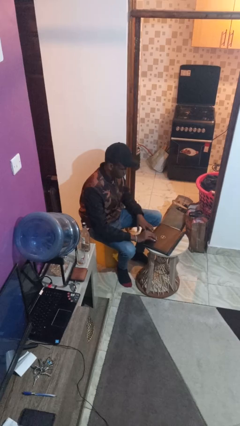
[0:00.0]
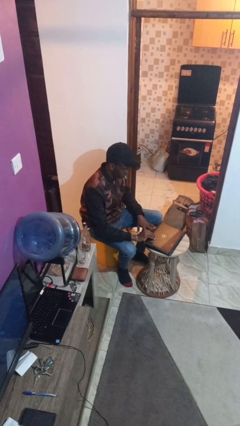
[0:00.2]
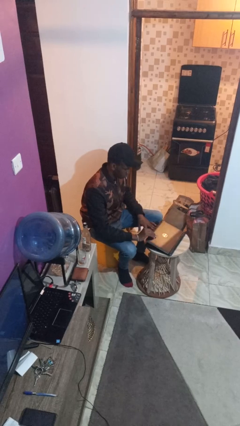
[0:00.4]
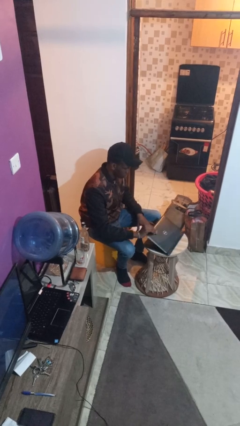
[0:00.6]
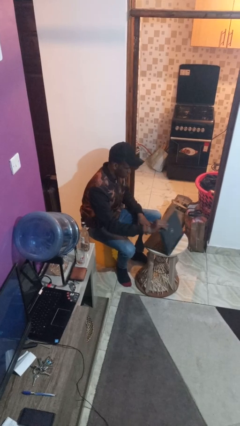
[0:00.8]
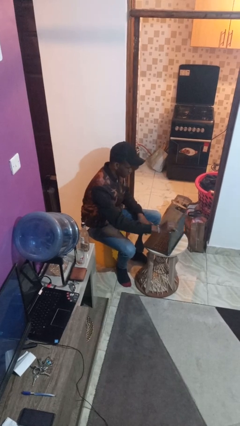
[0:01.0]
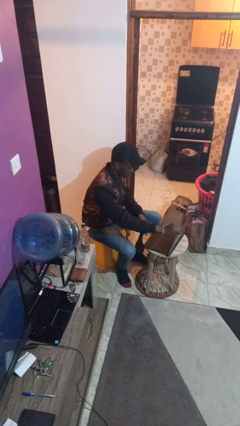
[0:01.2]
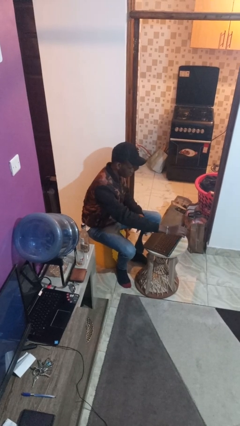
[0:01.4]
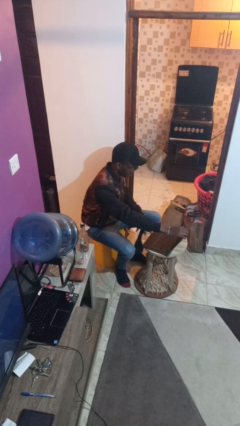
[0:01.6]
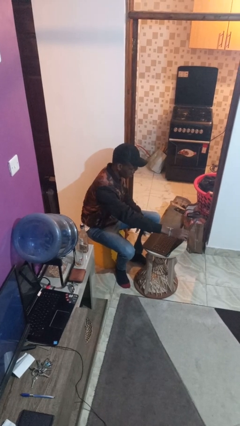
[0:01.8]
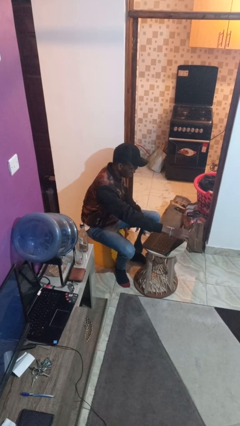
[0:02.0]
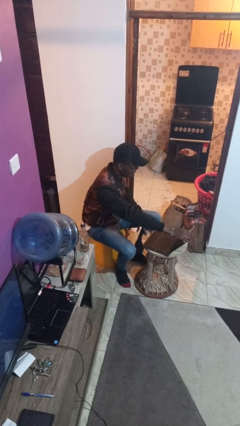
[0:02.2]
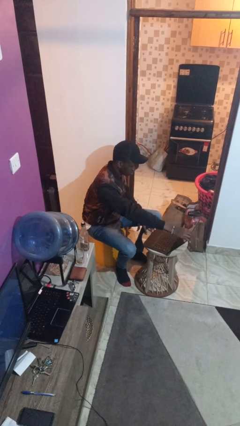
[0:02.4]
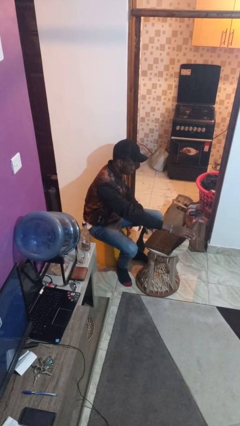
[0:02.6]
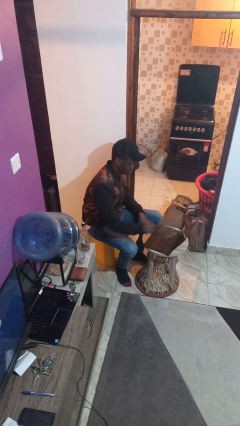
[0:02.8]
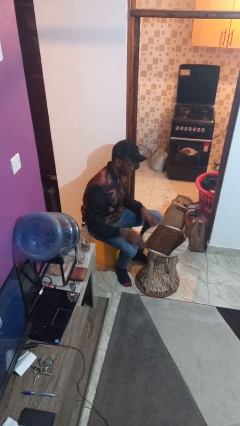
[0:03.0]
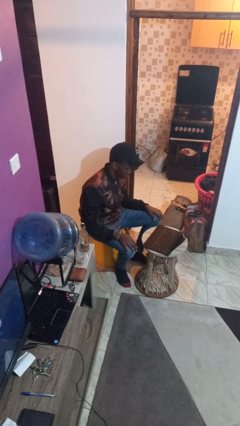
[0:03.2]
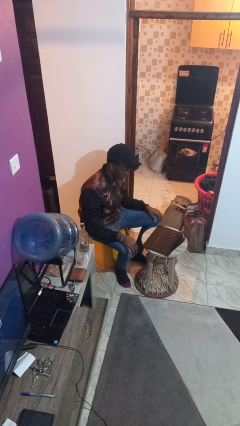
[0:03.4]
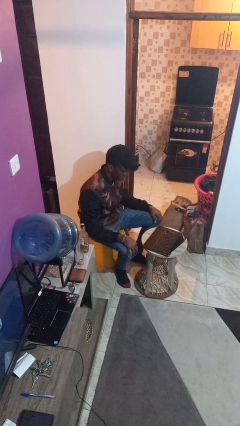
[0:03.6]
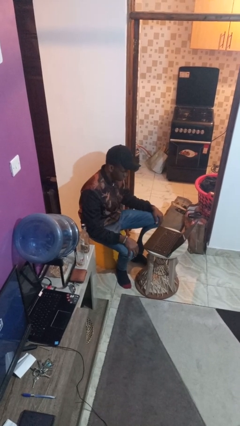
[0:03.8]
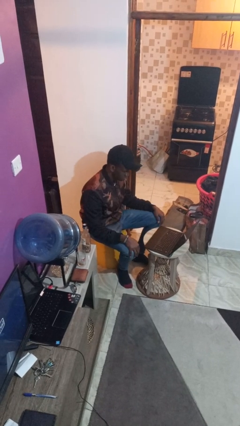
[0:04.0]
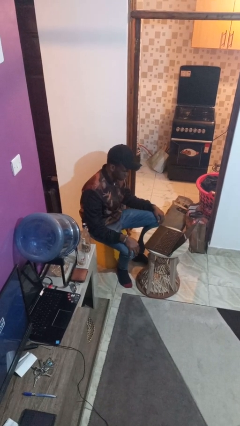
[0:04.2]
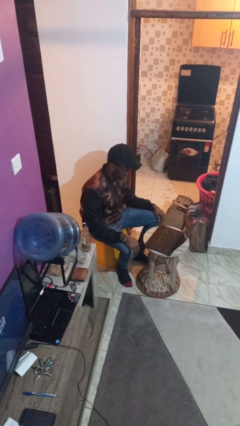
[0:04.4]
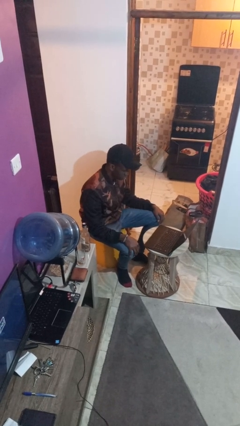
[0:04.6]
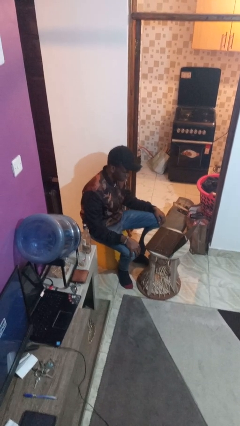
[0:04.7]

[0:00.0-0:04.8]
person opens laptop

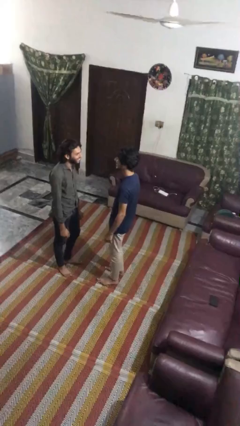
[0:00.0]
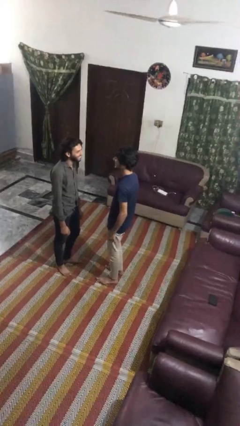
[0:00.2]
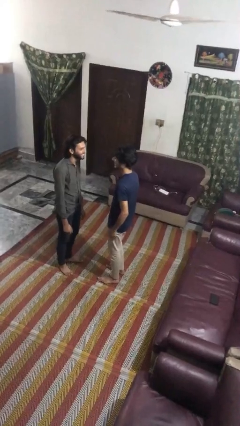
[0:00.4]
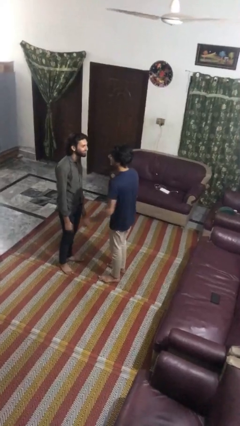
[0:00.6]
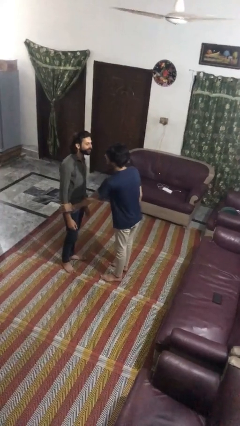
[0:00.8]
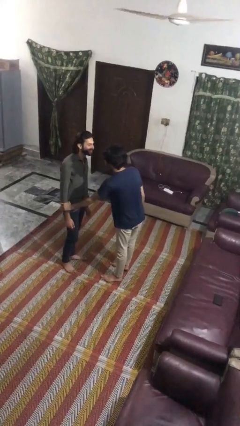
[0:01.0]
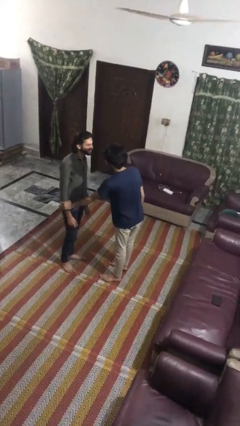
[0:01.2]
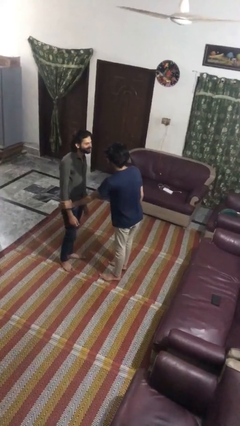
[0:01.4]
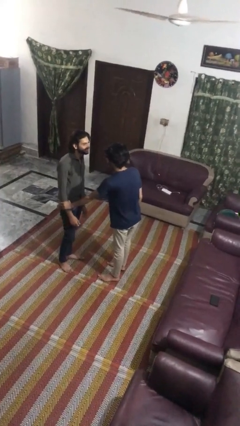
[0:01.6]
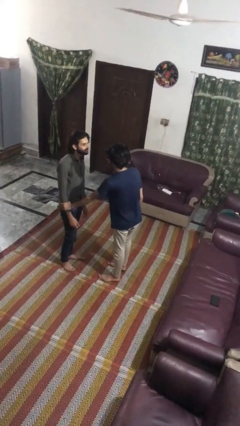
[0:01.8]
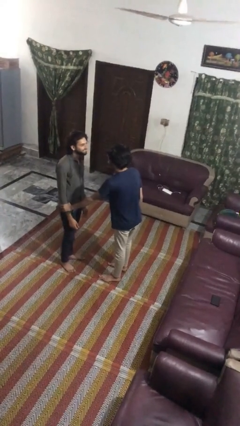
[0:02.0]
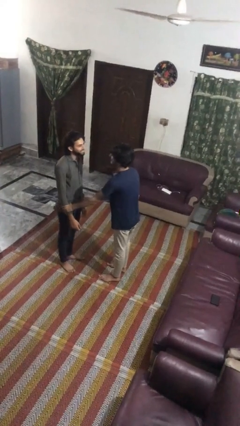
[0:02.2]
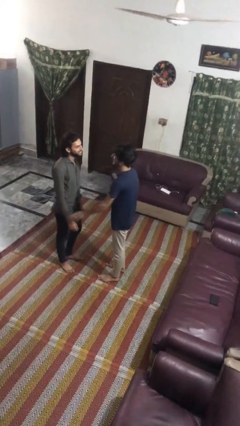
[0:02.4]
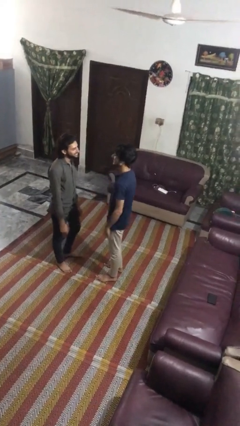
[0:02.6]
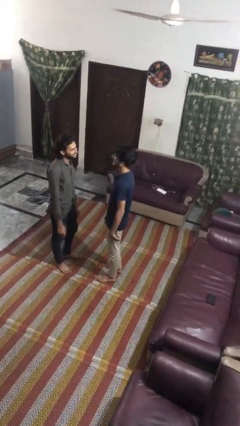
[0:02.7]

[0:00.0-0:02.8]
person grabs person by forearm

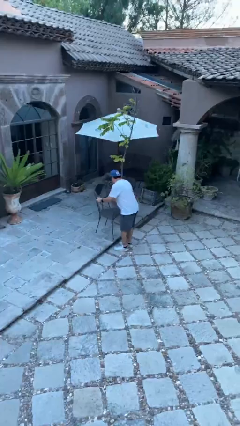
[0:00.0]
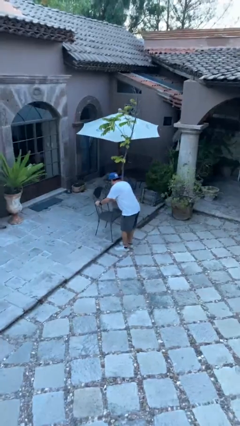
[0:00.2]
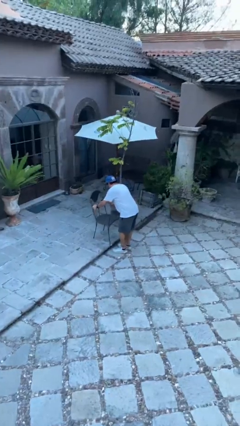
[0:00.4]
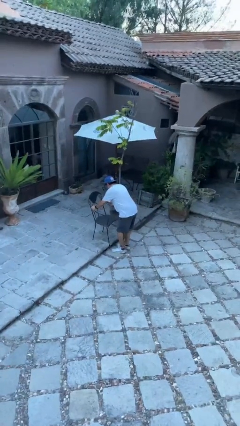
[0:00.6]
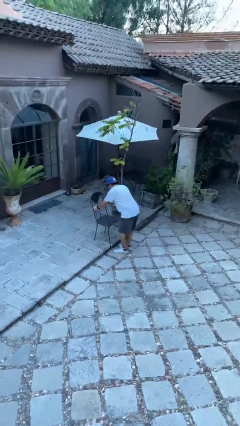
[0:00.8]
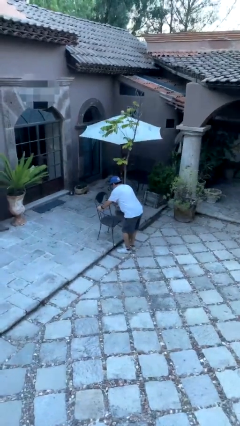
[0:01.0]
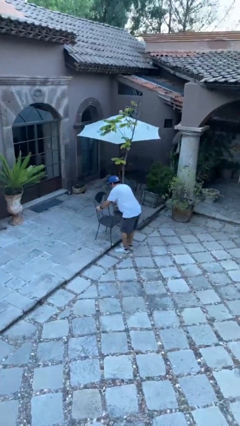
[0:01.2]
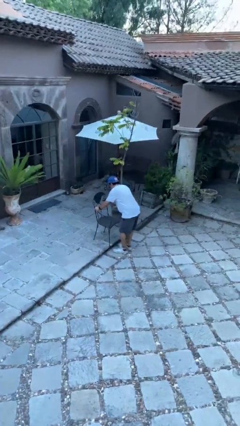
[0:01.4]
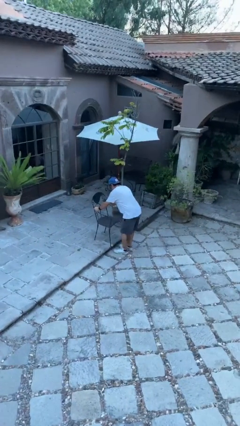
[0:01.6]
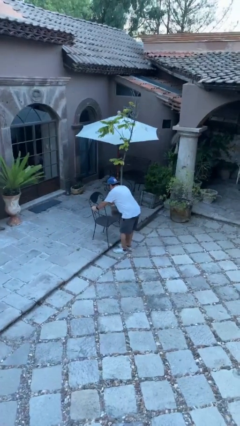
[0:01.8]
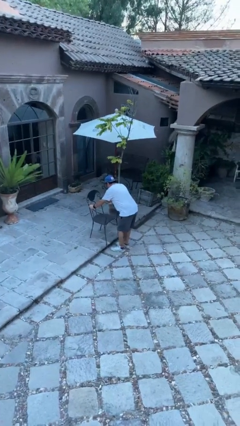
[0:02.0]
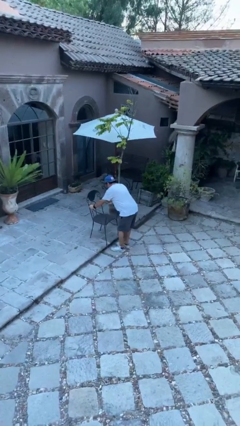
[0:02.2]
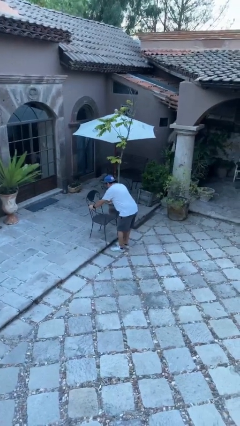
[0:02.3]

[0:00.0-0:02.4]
person puts down object on floor

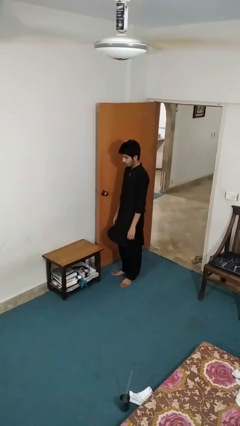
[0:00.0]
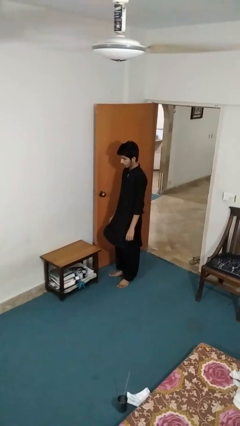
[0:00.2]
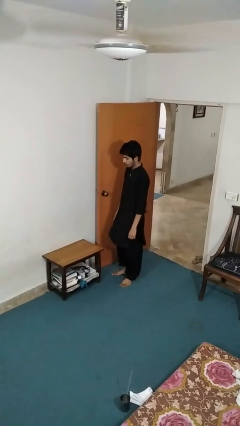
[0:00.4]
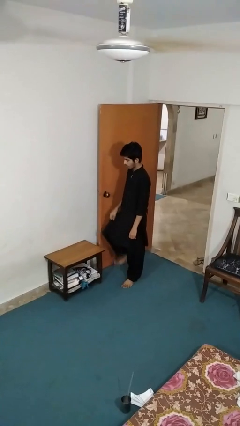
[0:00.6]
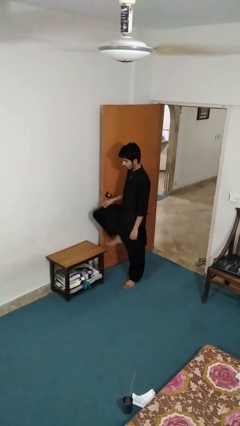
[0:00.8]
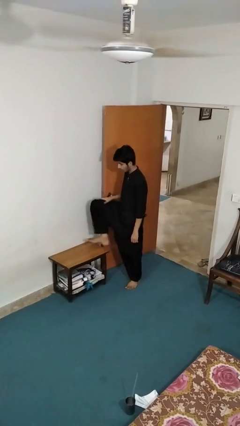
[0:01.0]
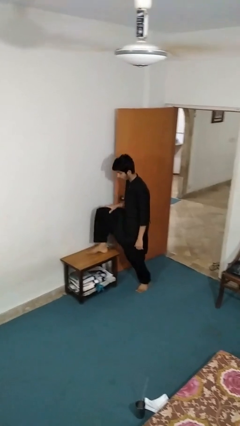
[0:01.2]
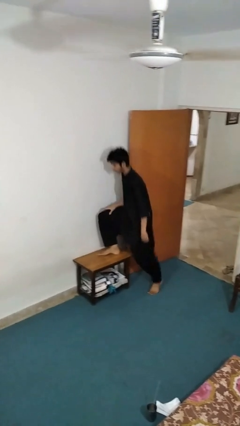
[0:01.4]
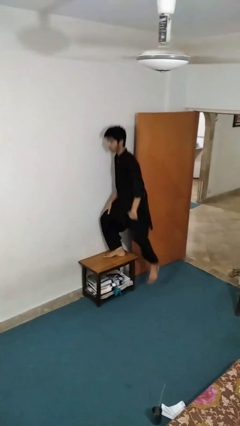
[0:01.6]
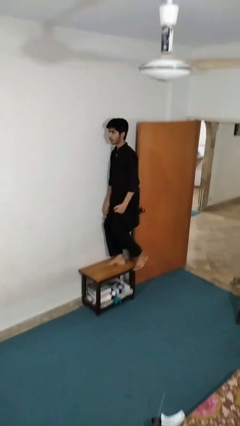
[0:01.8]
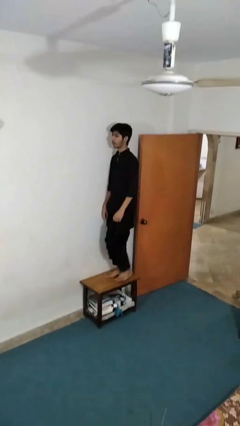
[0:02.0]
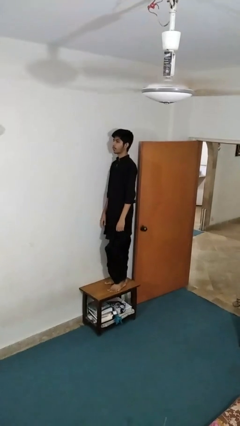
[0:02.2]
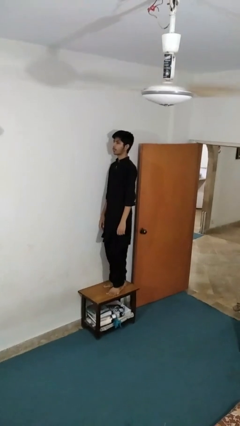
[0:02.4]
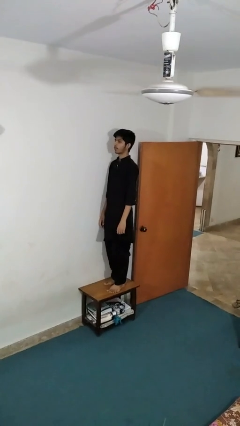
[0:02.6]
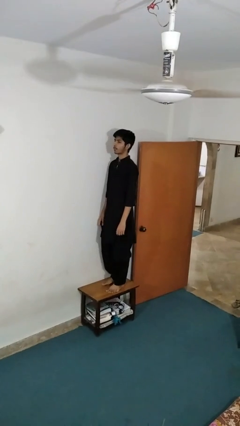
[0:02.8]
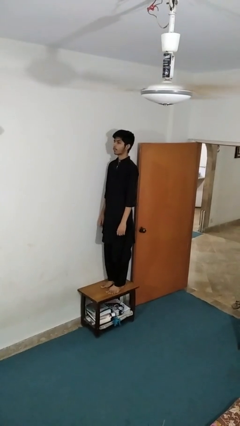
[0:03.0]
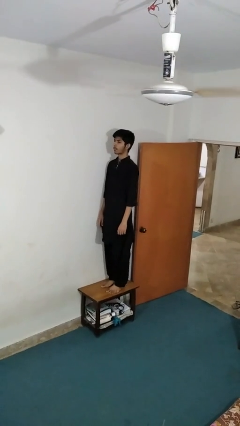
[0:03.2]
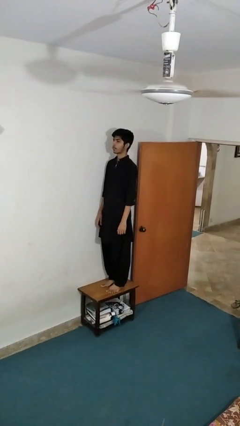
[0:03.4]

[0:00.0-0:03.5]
person climbs on table

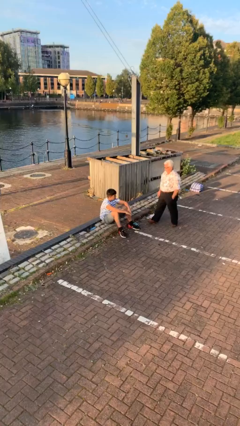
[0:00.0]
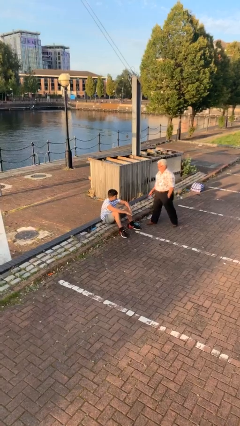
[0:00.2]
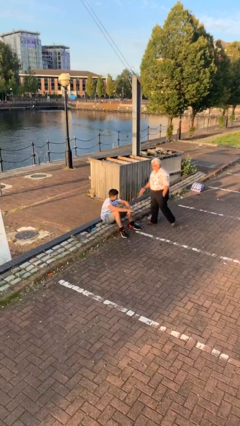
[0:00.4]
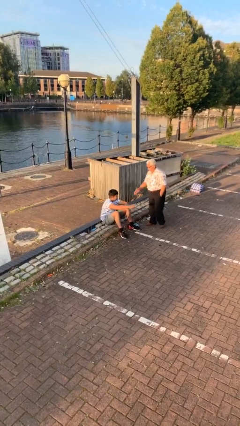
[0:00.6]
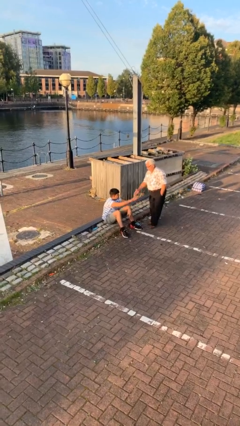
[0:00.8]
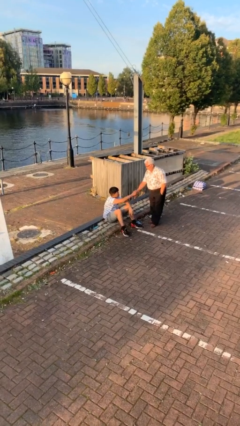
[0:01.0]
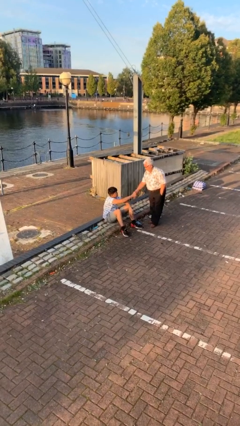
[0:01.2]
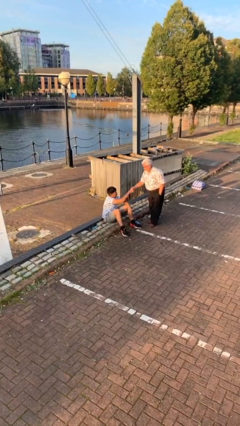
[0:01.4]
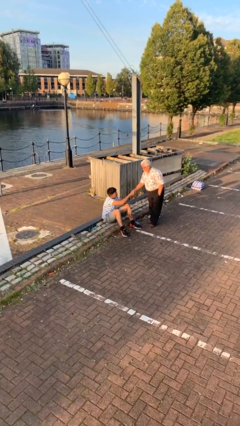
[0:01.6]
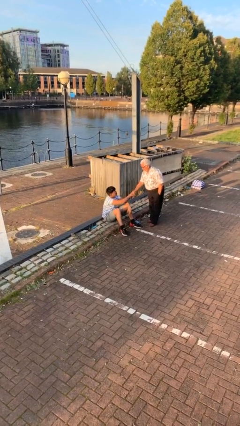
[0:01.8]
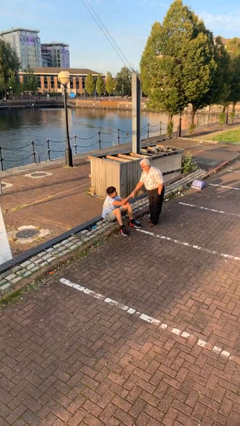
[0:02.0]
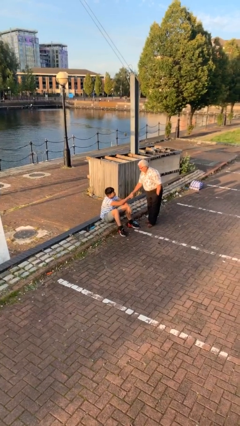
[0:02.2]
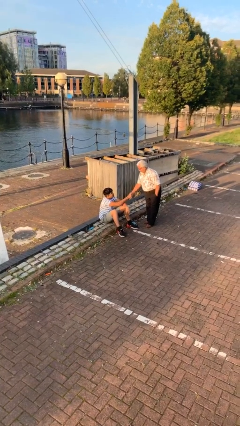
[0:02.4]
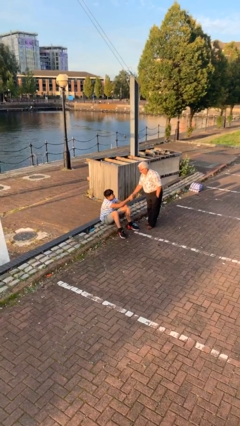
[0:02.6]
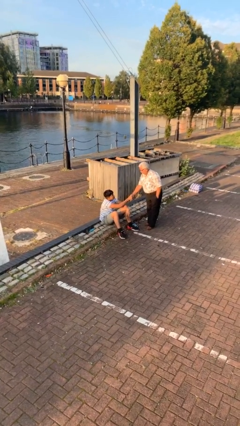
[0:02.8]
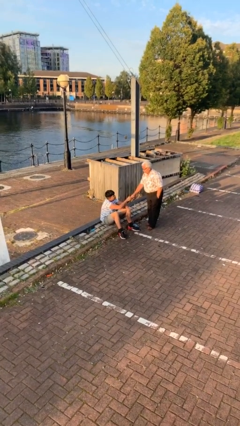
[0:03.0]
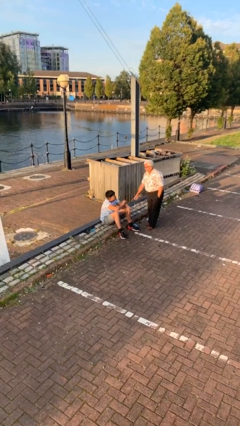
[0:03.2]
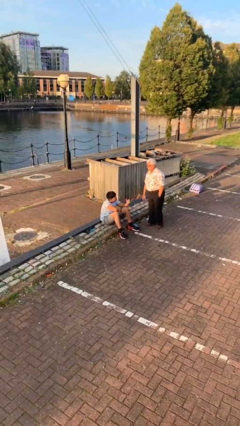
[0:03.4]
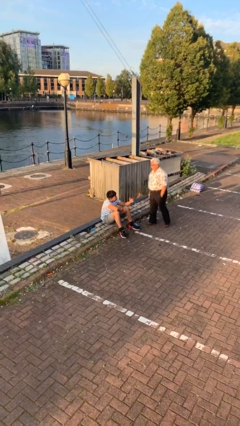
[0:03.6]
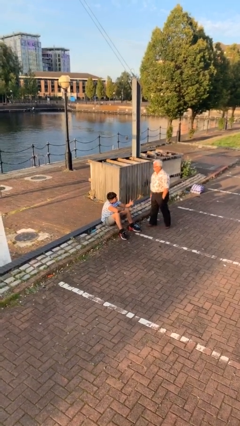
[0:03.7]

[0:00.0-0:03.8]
person shakes hand

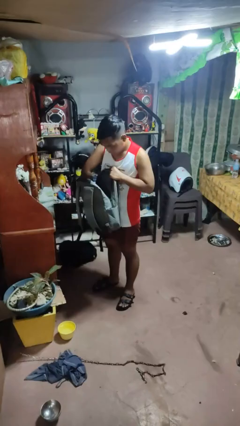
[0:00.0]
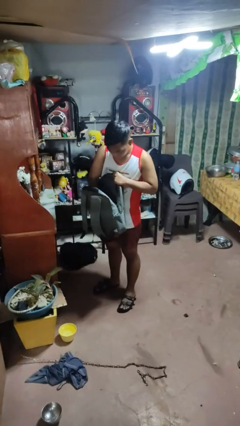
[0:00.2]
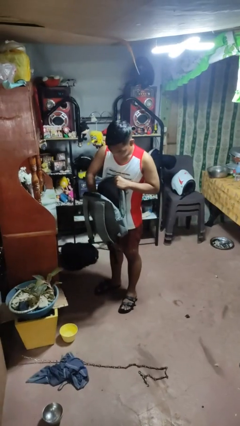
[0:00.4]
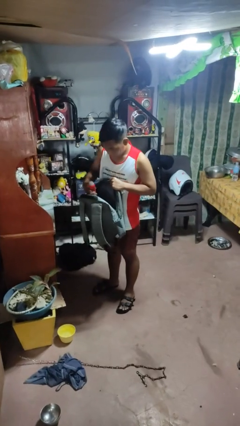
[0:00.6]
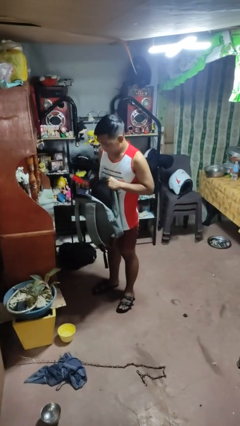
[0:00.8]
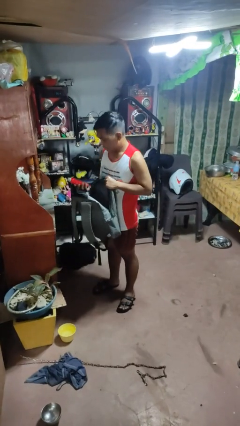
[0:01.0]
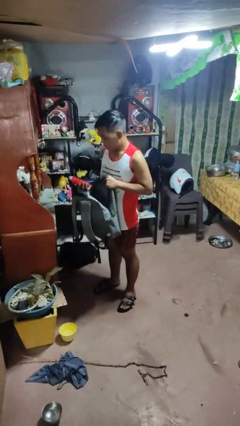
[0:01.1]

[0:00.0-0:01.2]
person takes object from bag
